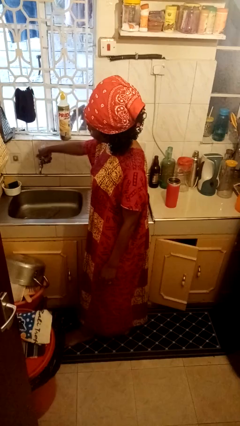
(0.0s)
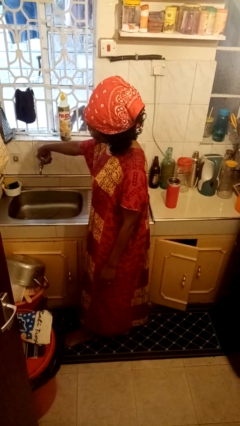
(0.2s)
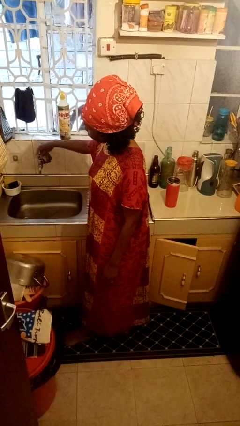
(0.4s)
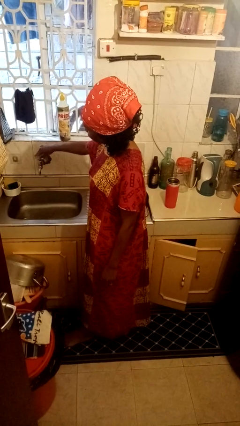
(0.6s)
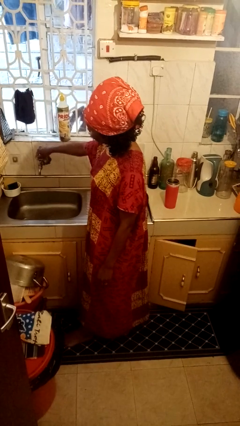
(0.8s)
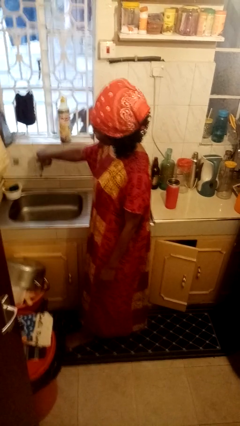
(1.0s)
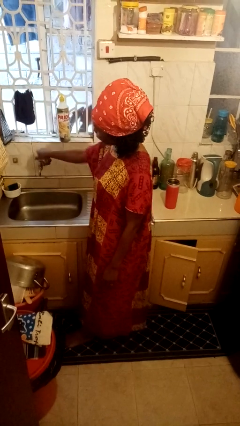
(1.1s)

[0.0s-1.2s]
person turns off faucet

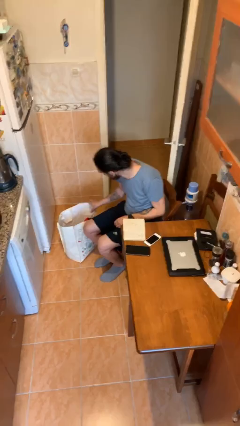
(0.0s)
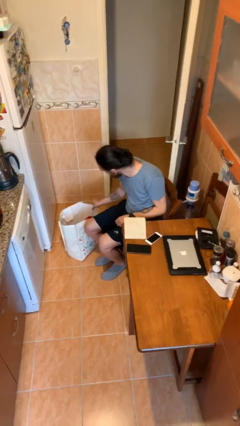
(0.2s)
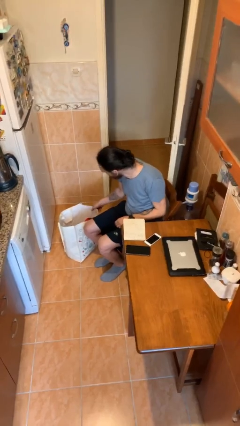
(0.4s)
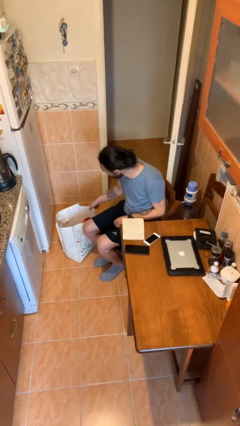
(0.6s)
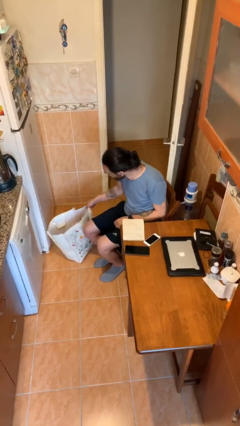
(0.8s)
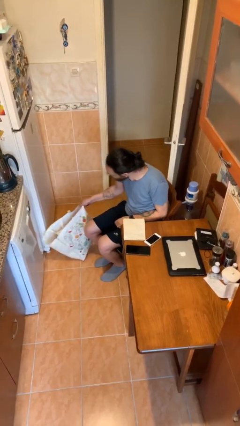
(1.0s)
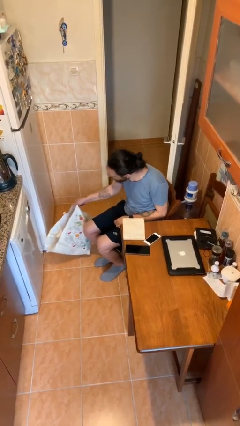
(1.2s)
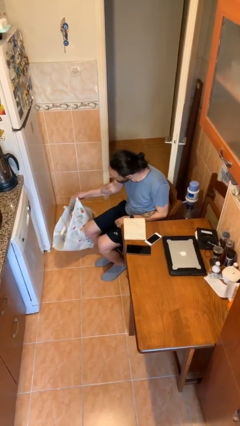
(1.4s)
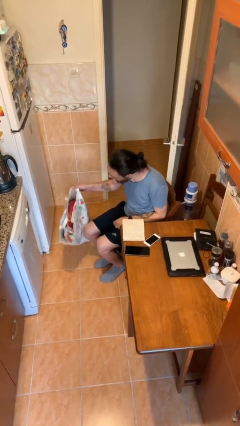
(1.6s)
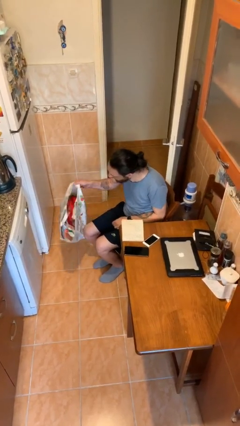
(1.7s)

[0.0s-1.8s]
person picks up object from floor

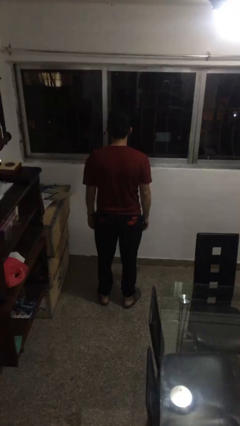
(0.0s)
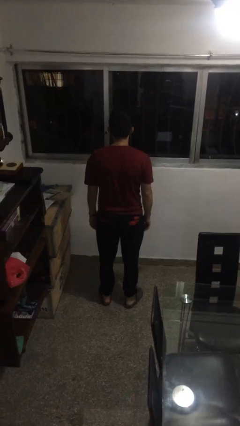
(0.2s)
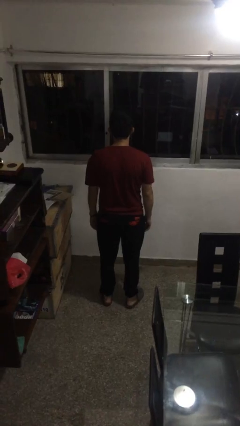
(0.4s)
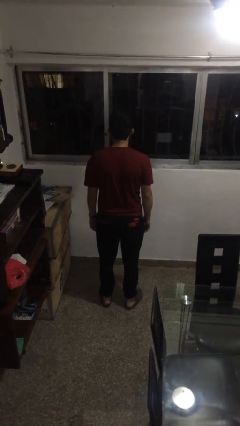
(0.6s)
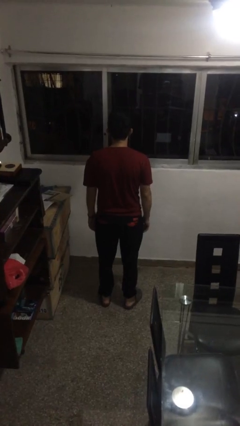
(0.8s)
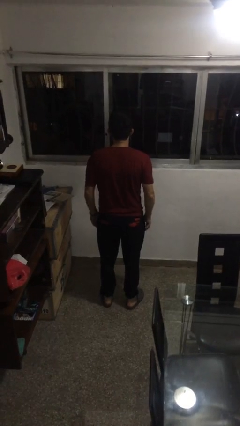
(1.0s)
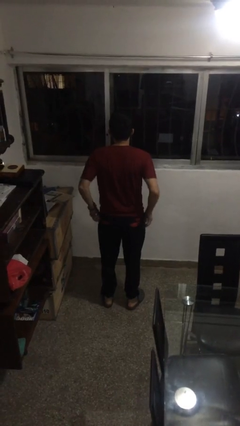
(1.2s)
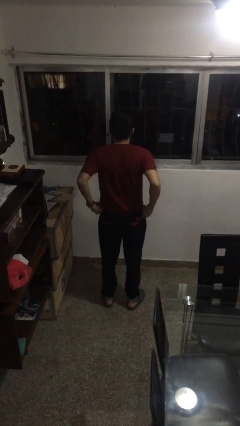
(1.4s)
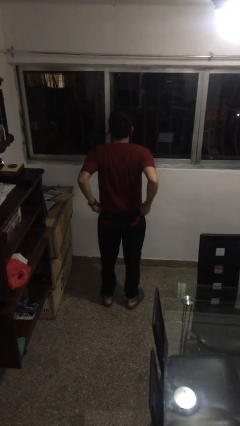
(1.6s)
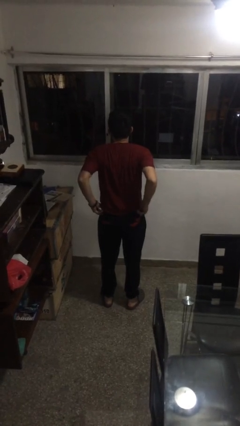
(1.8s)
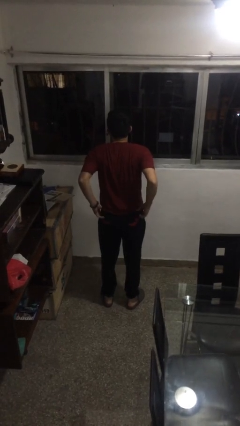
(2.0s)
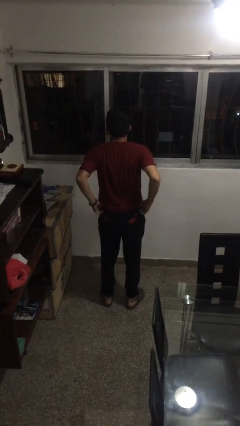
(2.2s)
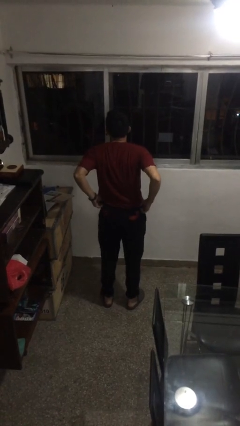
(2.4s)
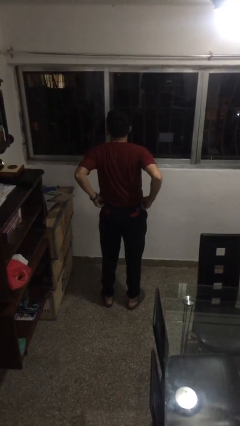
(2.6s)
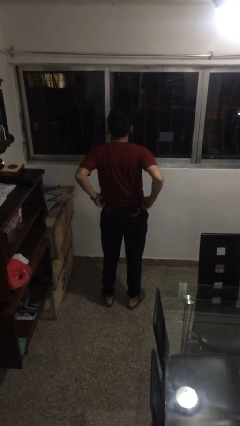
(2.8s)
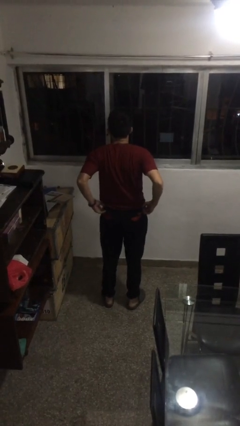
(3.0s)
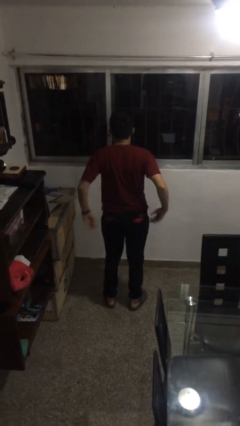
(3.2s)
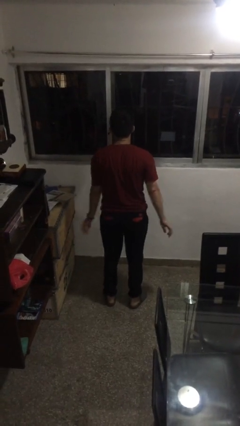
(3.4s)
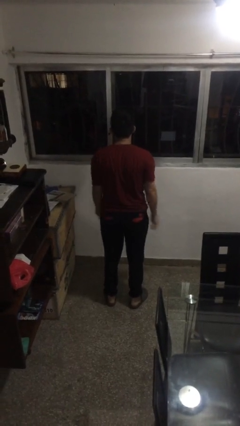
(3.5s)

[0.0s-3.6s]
person hikes up pants

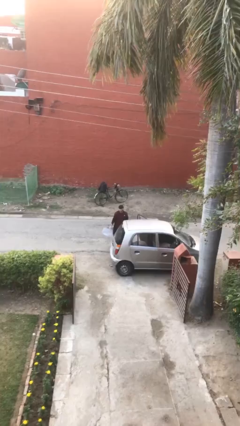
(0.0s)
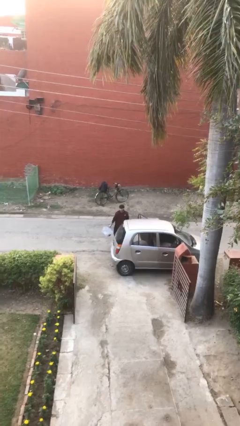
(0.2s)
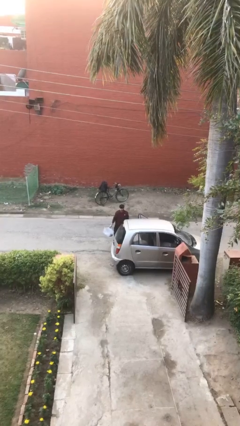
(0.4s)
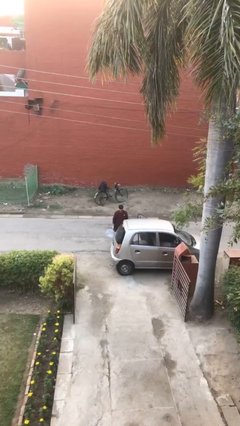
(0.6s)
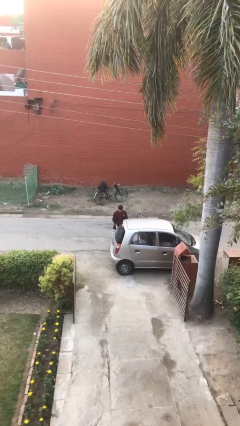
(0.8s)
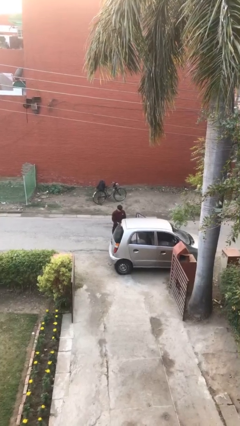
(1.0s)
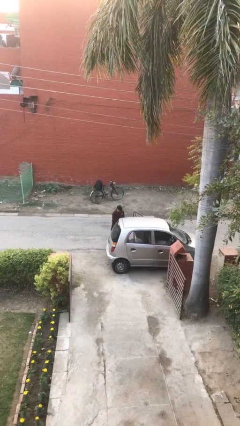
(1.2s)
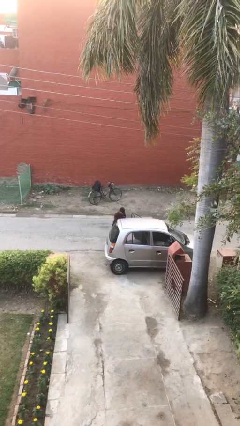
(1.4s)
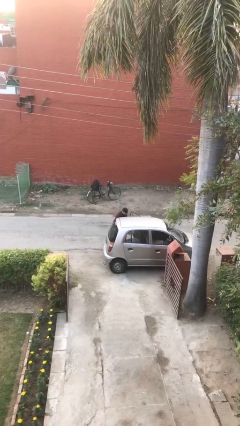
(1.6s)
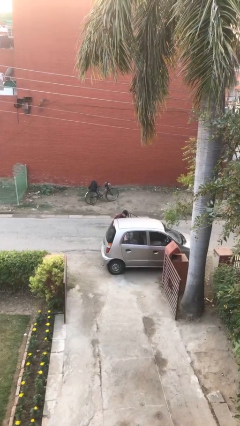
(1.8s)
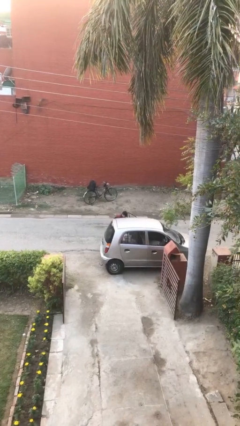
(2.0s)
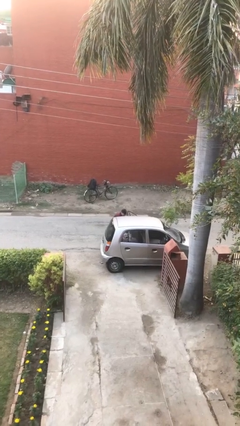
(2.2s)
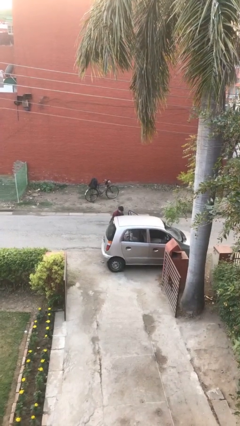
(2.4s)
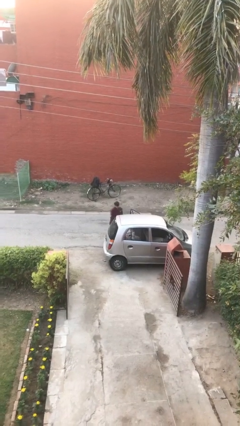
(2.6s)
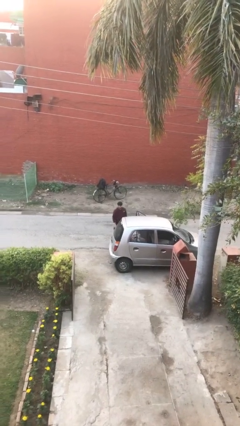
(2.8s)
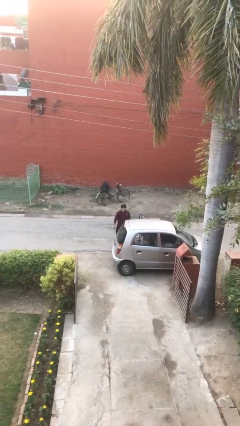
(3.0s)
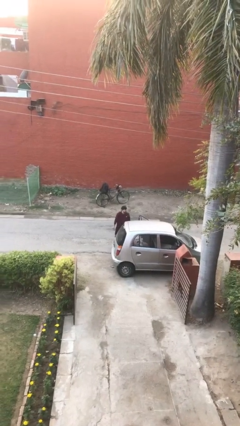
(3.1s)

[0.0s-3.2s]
person loads car

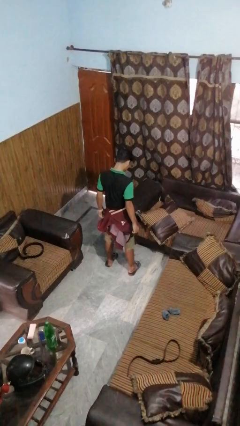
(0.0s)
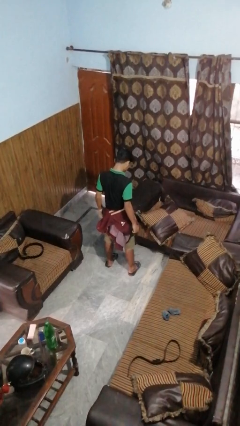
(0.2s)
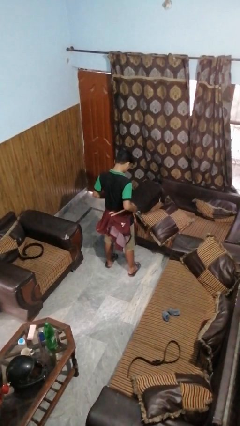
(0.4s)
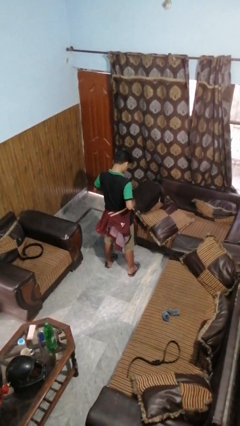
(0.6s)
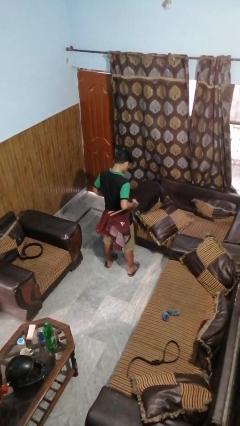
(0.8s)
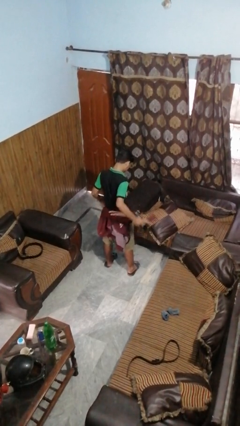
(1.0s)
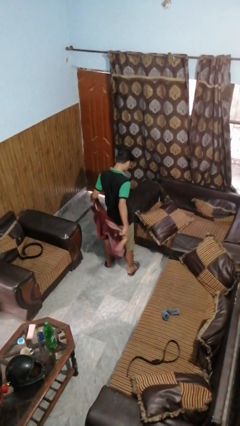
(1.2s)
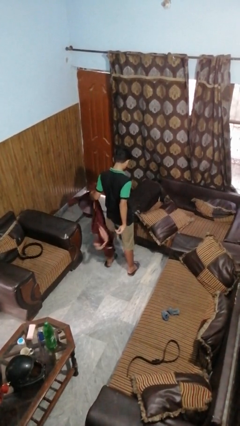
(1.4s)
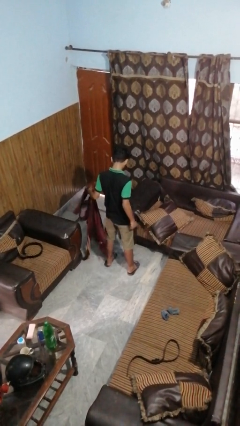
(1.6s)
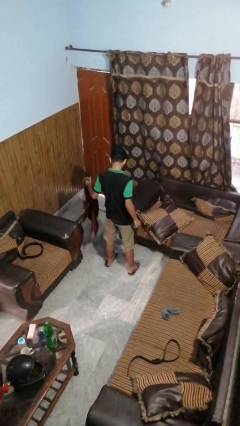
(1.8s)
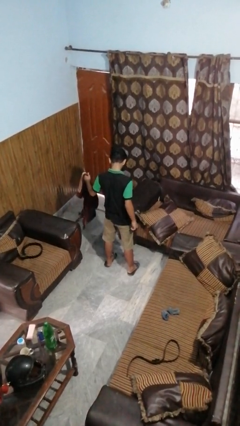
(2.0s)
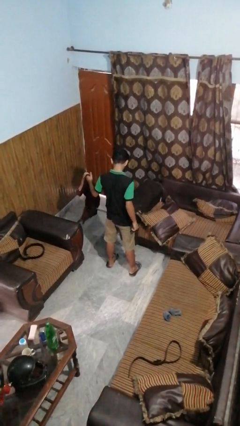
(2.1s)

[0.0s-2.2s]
person unties jacket around waist

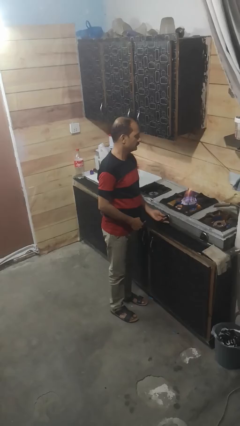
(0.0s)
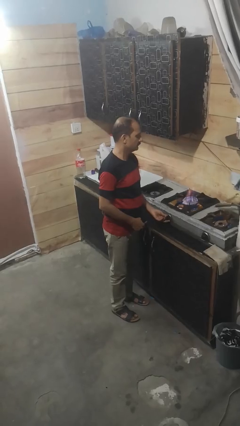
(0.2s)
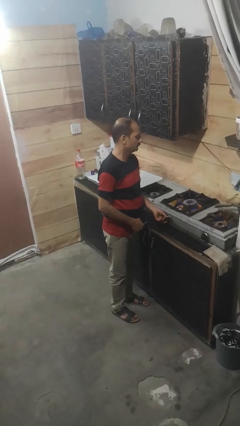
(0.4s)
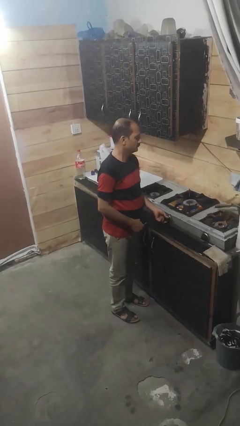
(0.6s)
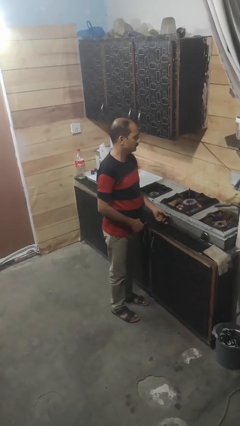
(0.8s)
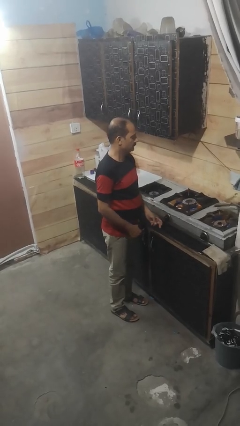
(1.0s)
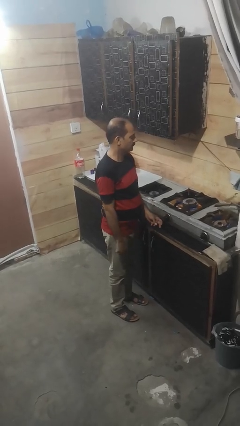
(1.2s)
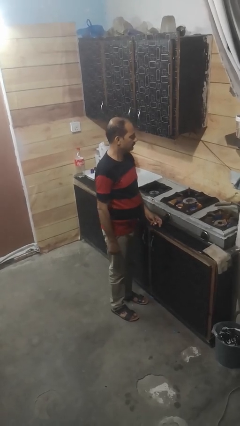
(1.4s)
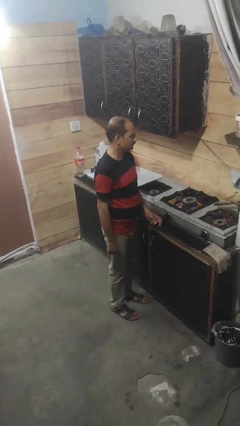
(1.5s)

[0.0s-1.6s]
person turns off stovetop

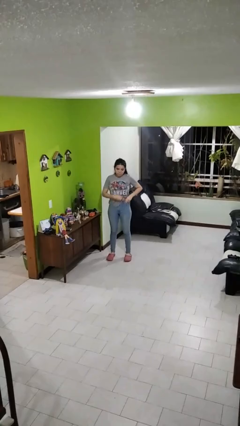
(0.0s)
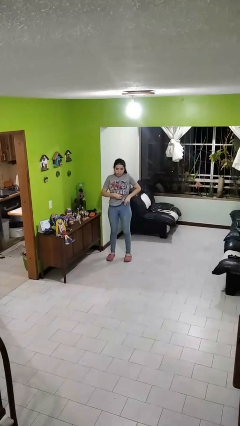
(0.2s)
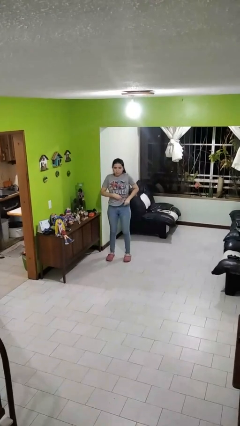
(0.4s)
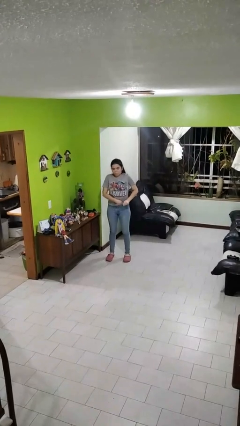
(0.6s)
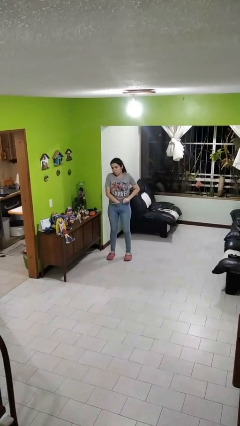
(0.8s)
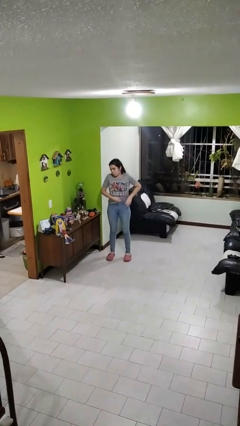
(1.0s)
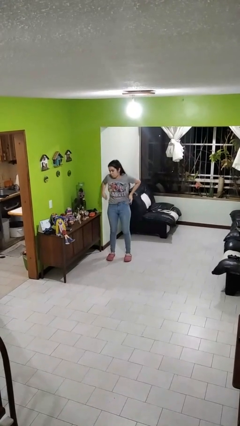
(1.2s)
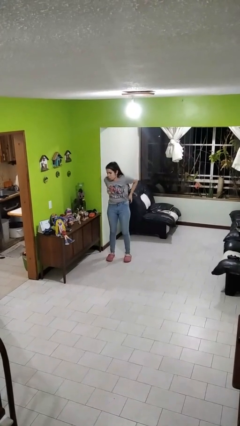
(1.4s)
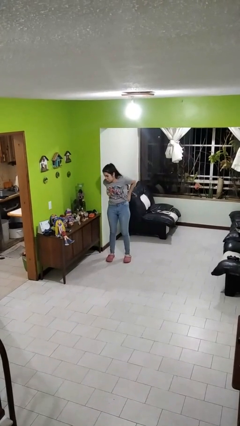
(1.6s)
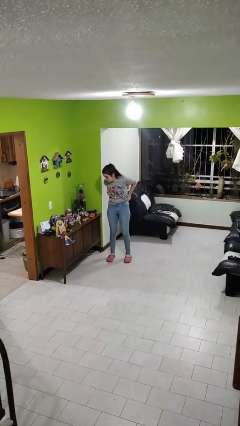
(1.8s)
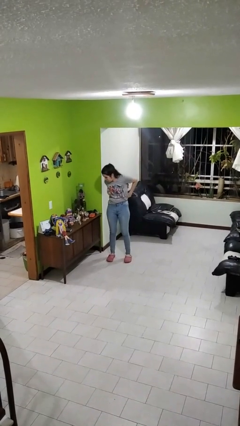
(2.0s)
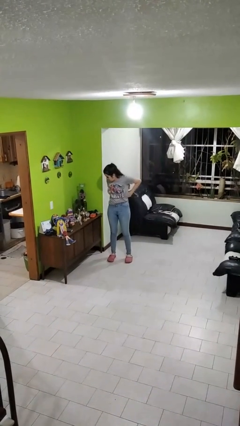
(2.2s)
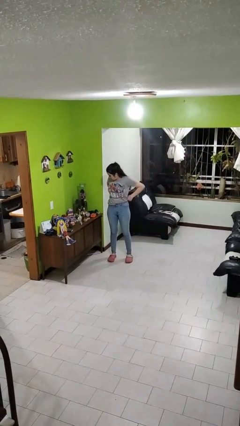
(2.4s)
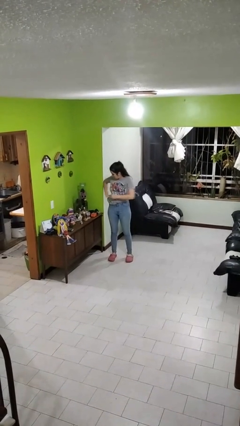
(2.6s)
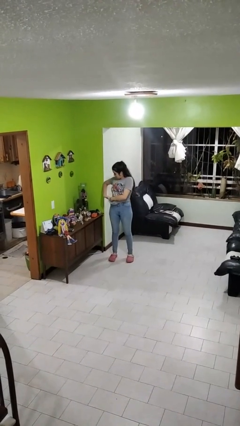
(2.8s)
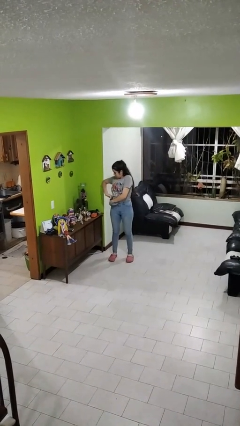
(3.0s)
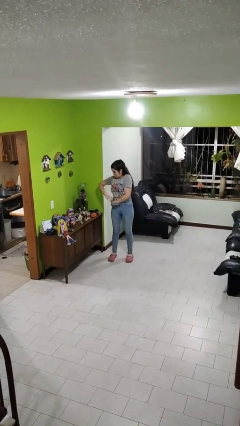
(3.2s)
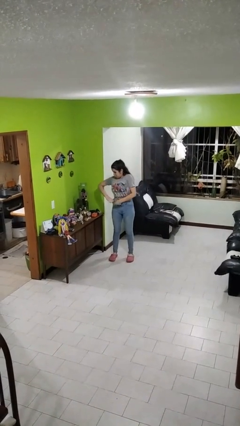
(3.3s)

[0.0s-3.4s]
person tucks in shirt
